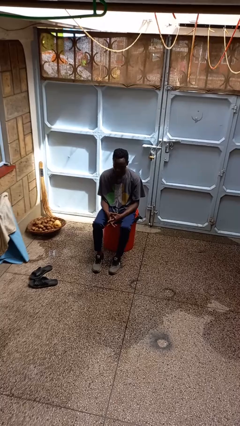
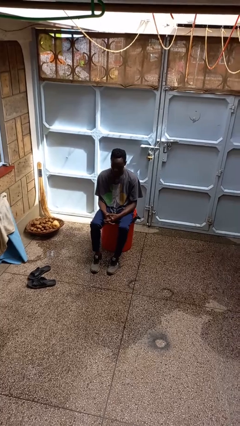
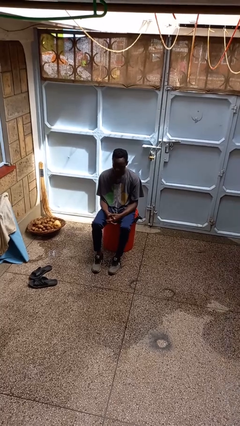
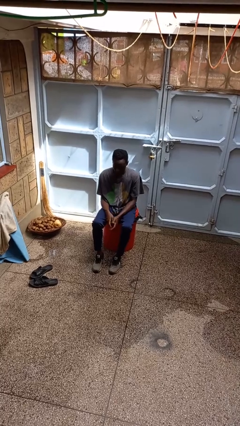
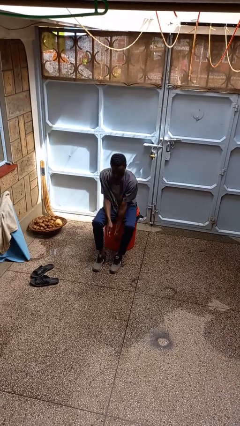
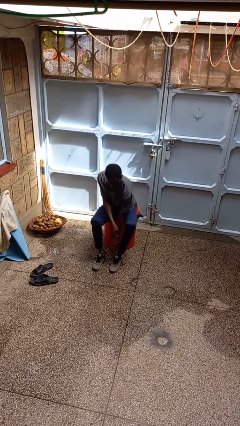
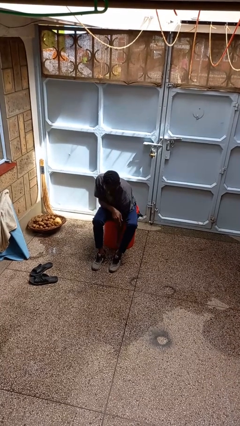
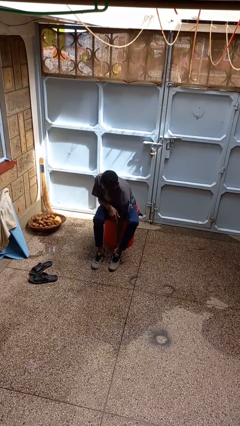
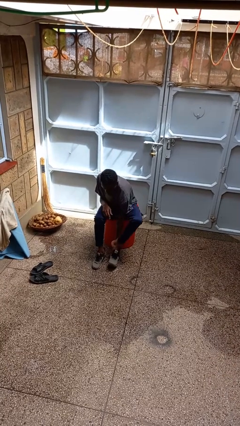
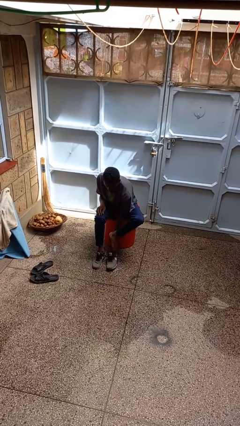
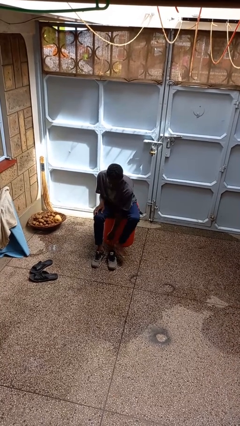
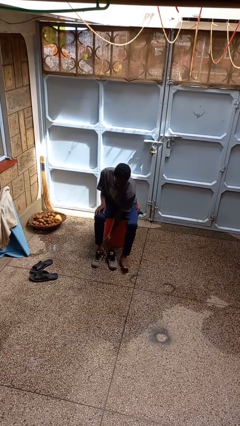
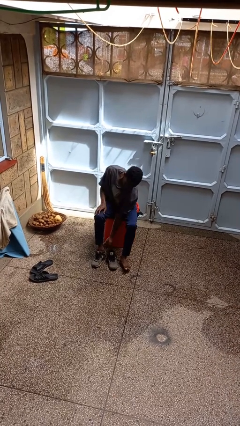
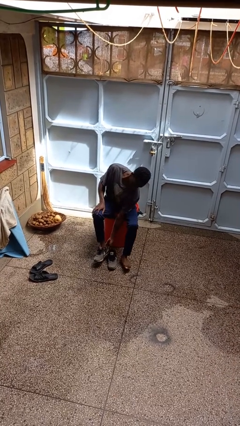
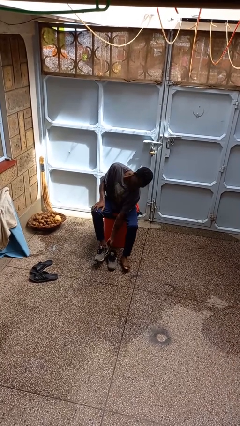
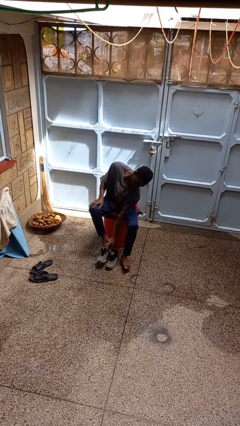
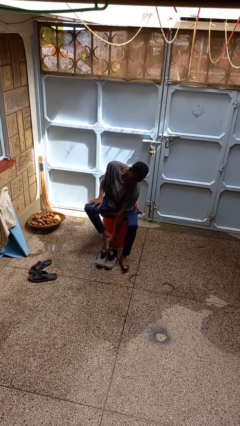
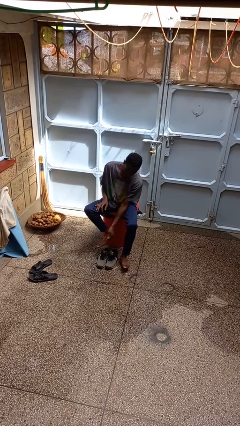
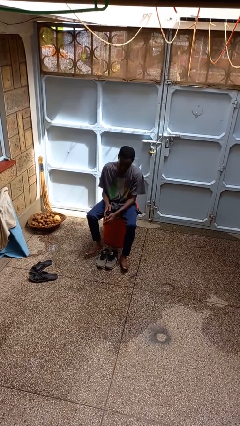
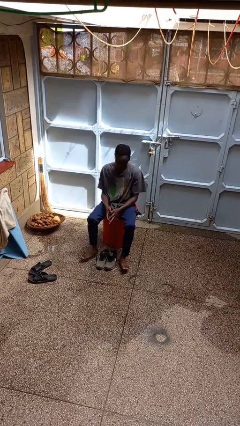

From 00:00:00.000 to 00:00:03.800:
person takes off shoes

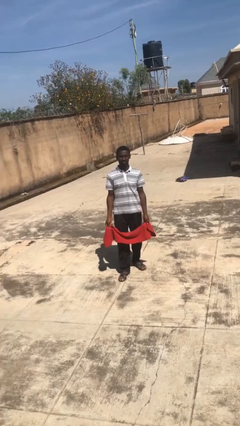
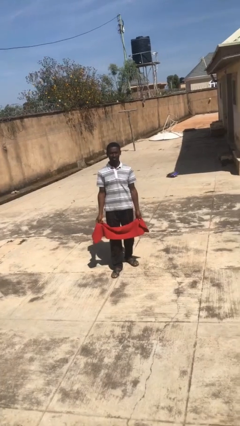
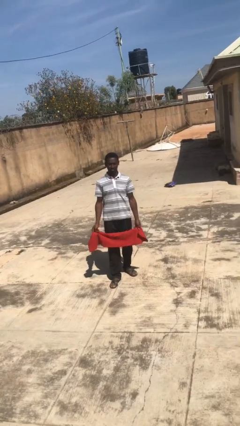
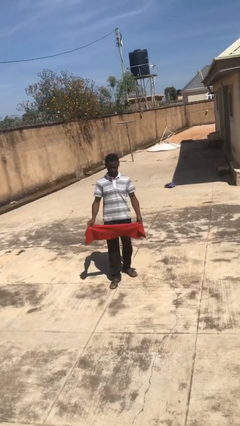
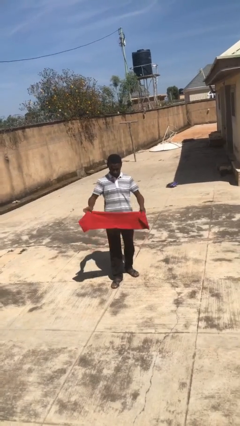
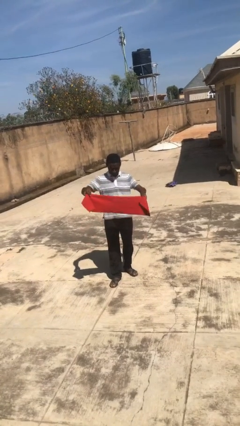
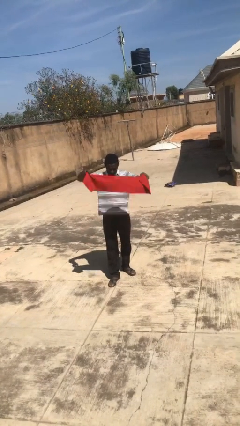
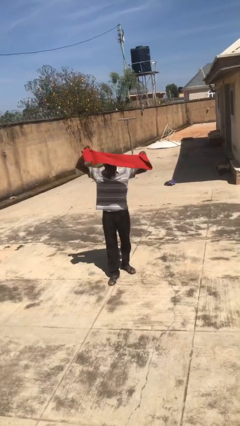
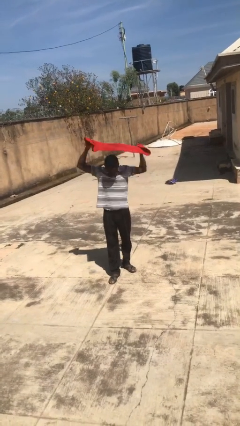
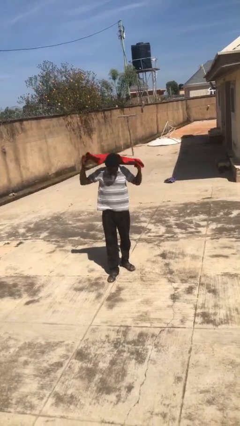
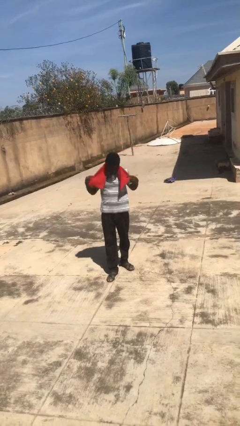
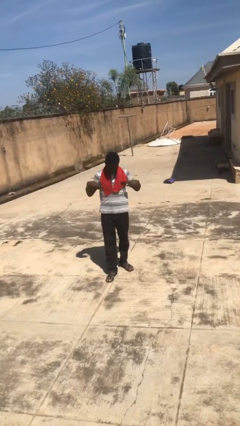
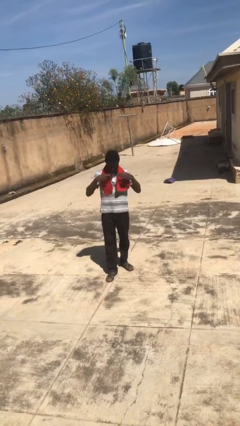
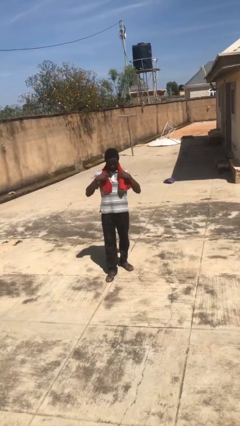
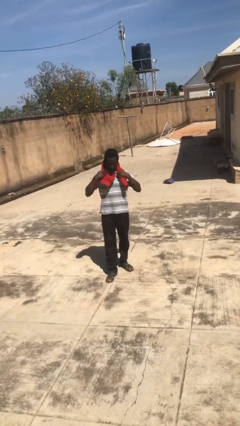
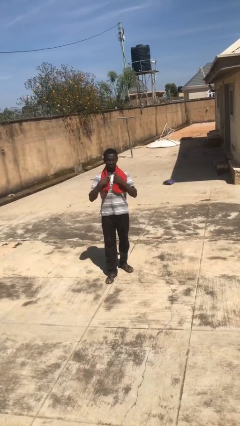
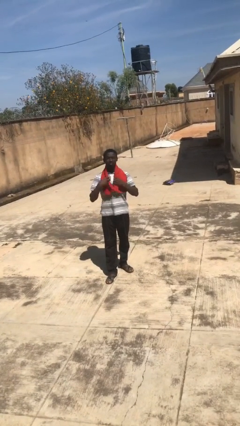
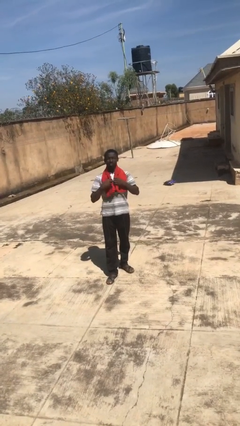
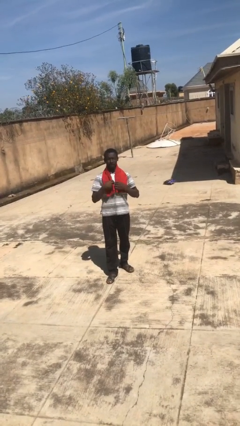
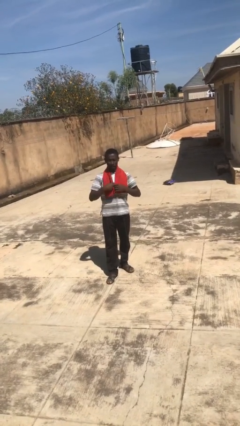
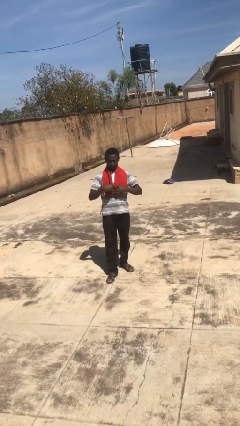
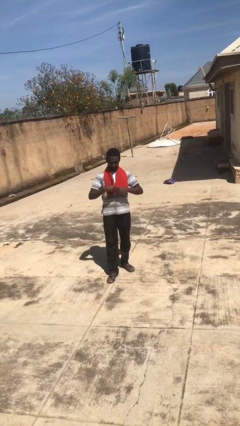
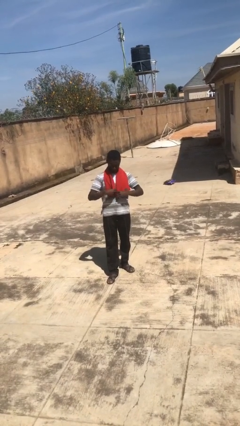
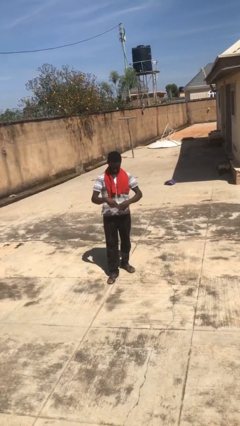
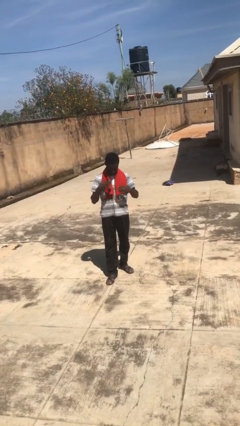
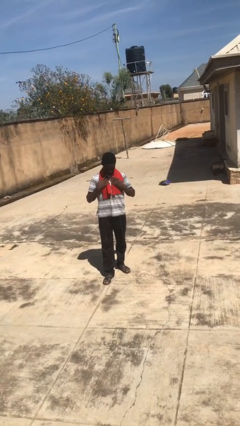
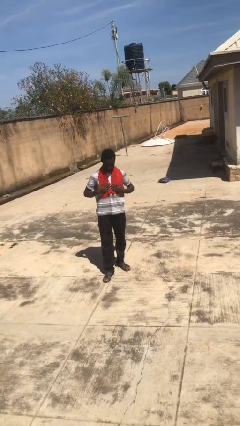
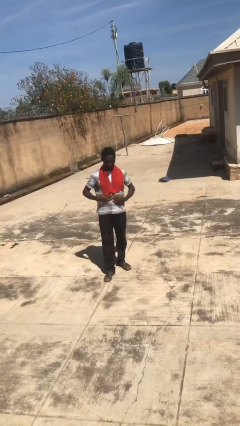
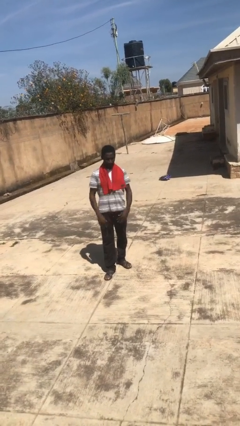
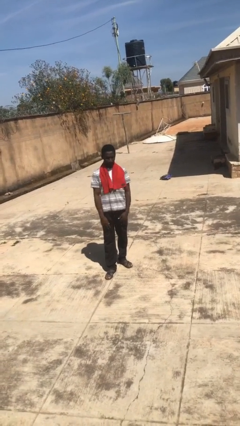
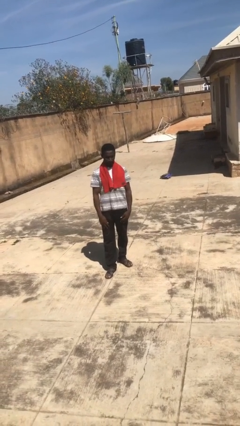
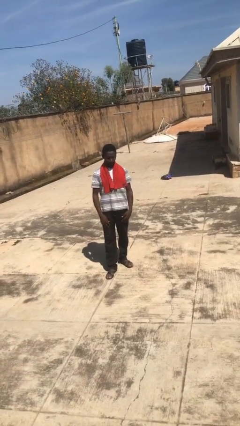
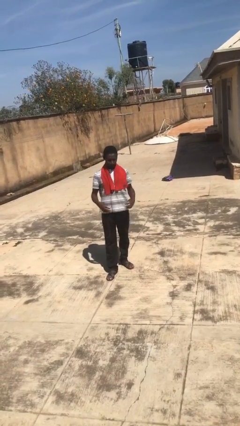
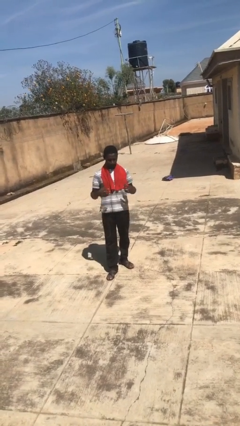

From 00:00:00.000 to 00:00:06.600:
person puts on scarf

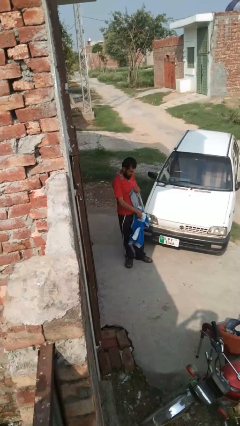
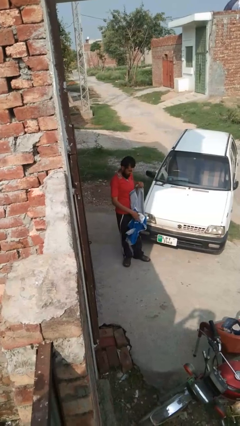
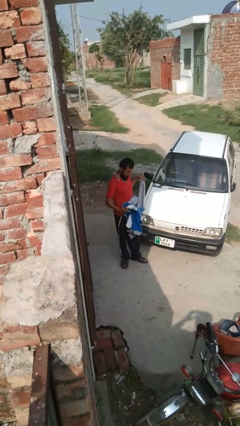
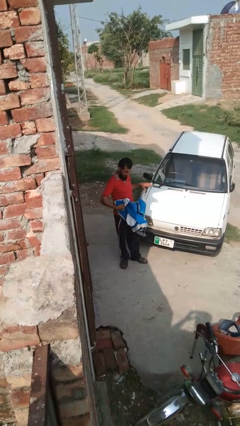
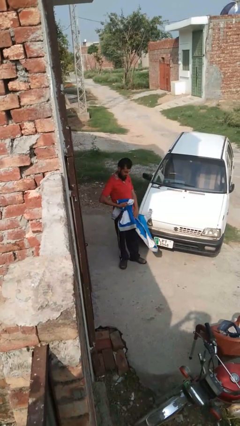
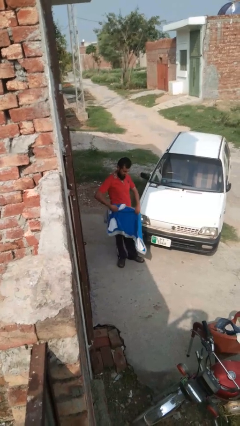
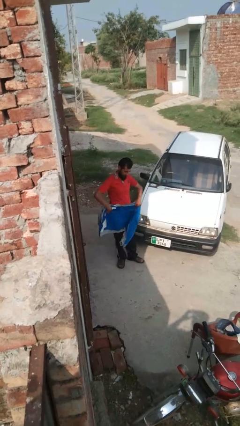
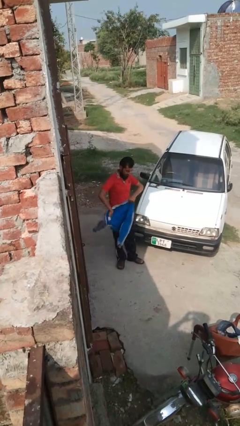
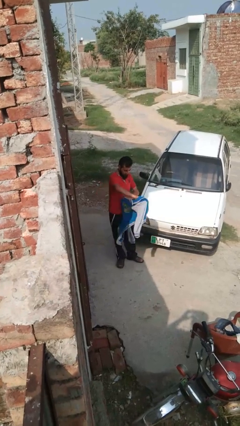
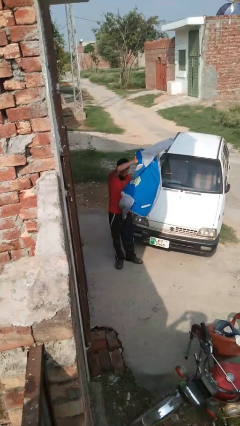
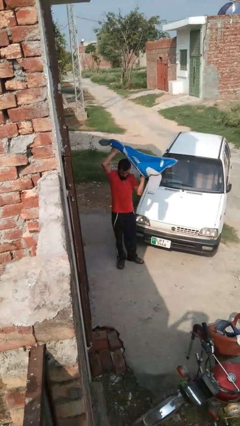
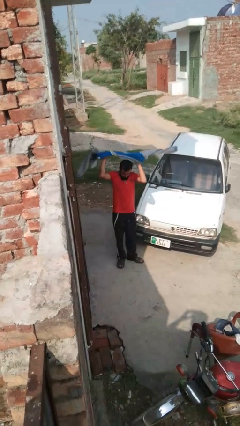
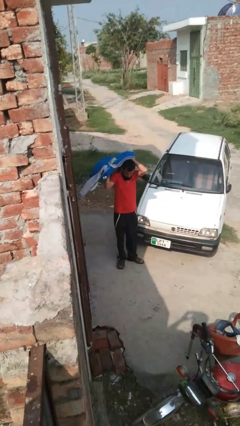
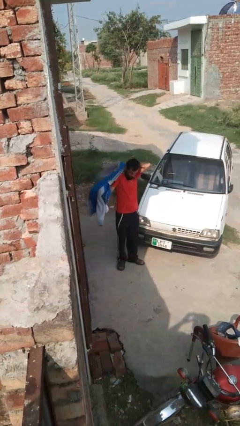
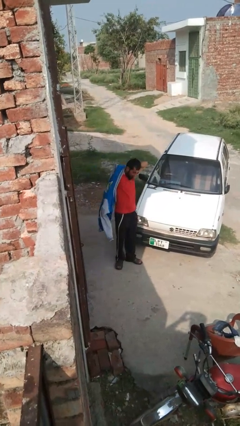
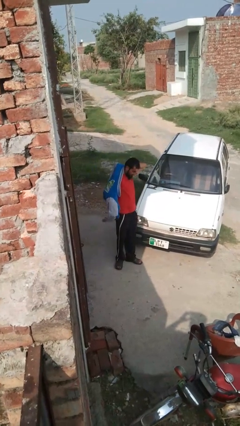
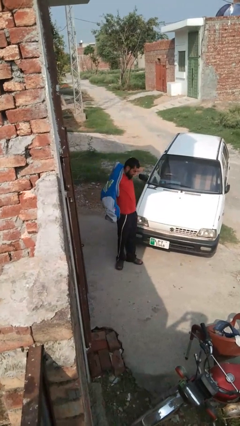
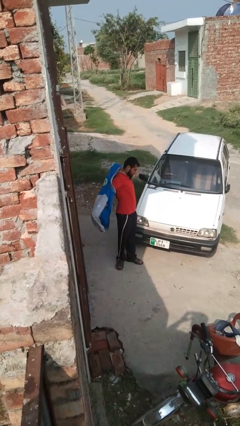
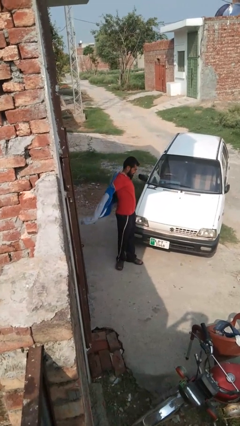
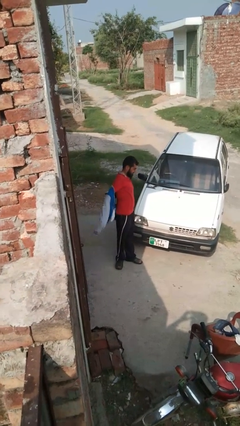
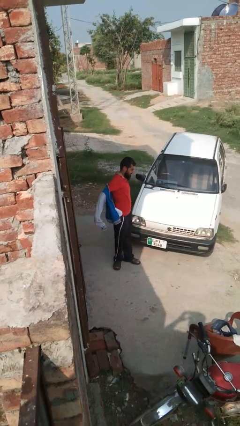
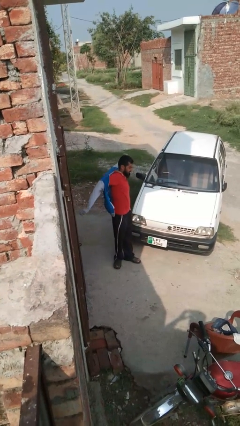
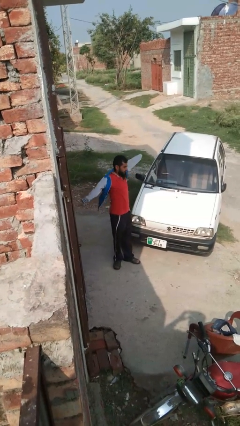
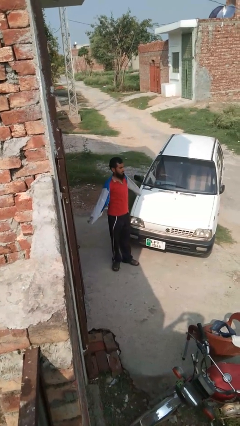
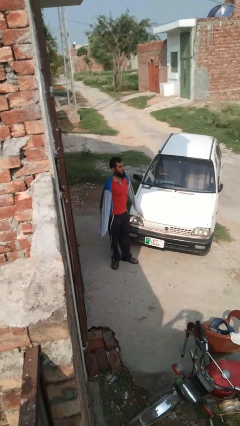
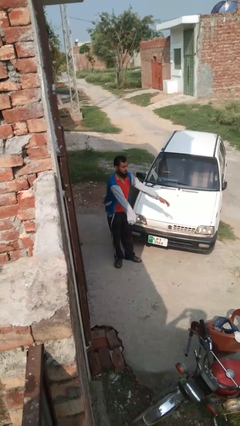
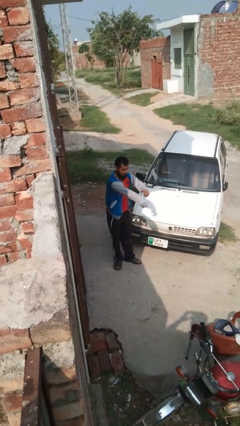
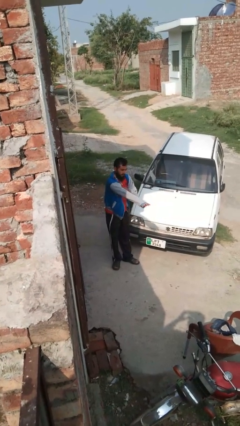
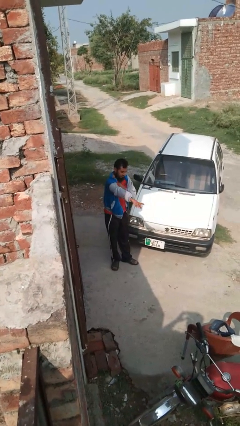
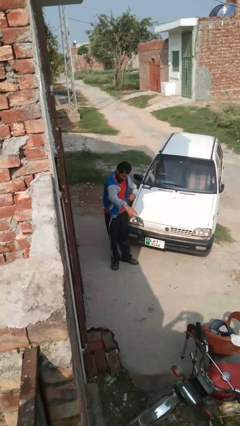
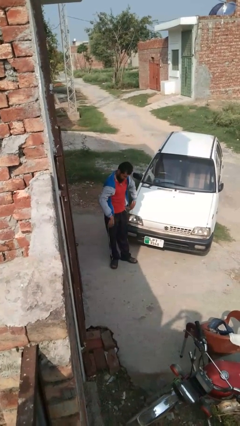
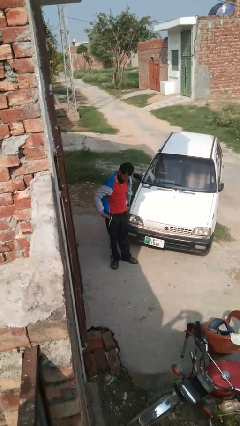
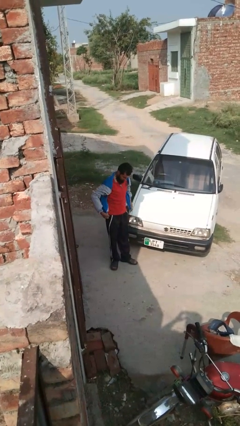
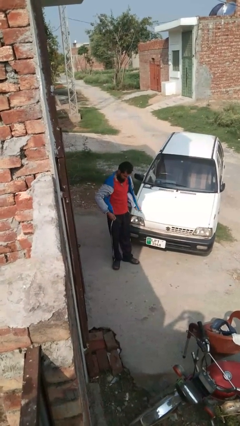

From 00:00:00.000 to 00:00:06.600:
person puts on jacket

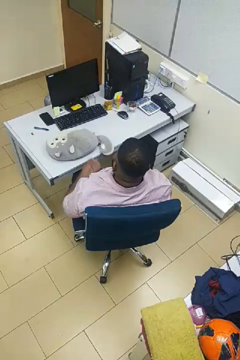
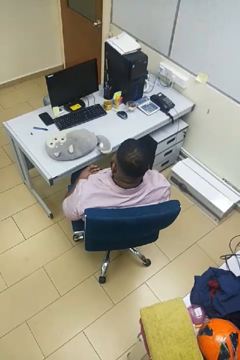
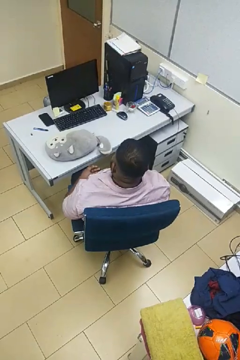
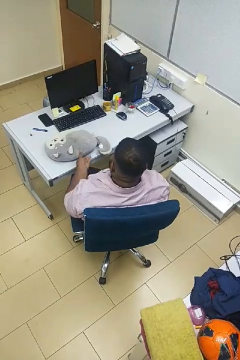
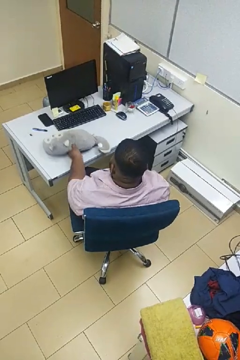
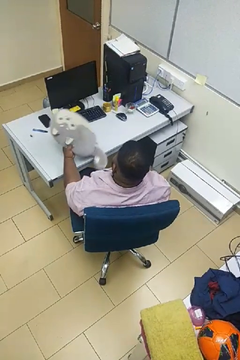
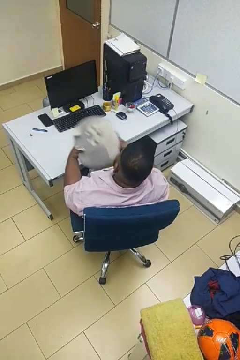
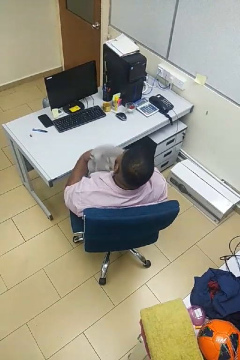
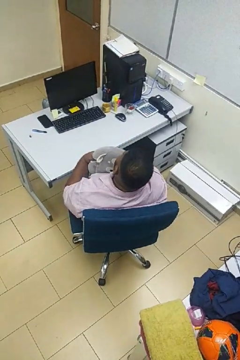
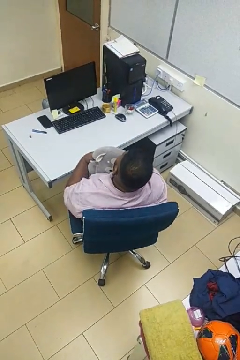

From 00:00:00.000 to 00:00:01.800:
person hugs stuffed animal
